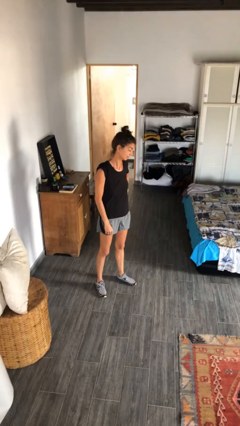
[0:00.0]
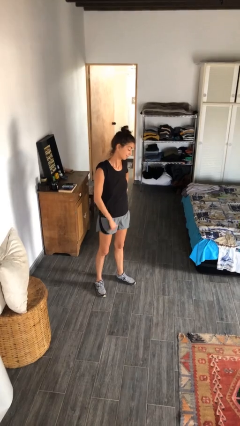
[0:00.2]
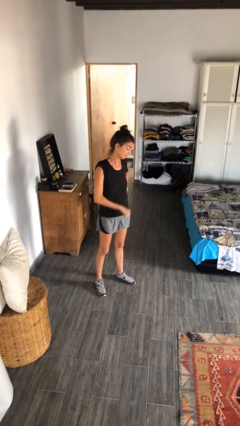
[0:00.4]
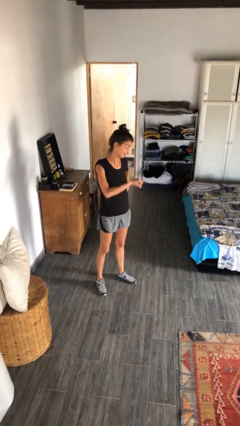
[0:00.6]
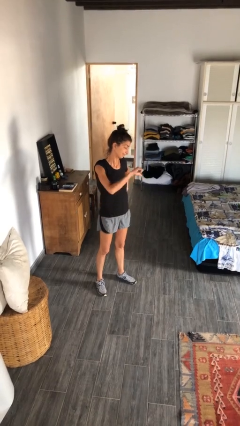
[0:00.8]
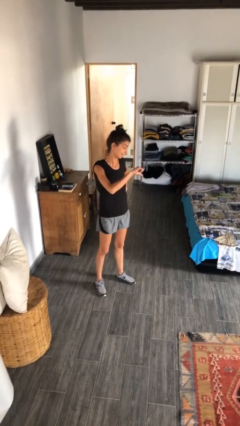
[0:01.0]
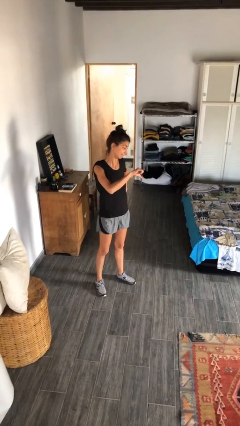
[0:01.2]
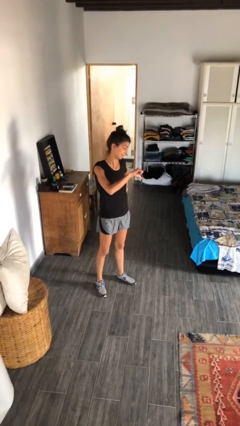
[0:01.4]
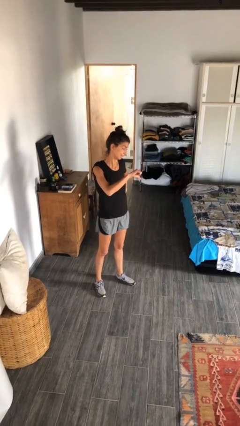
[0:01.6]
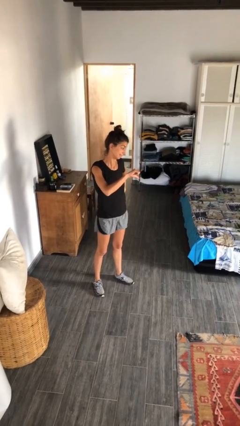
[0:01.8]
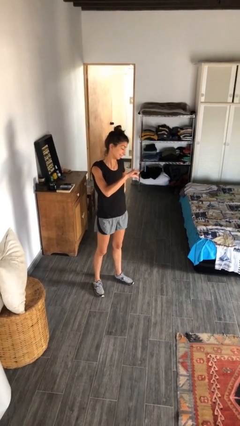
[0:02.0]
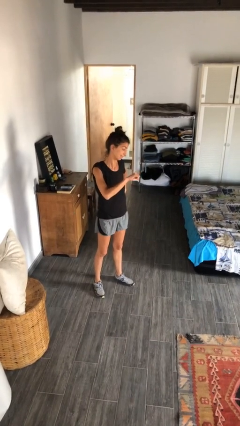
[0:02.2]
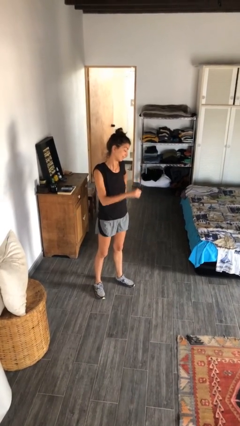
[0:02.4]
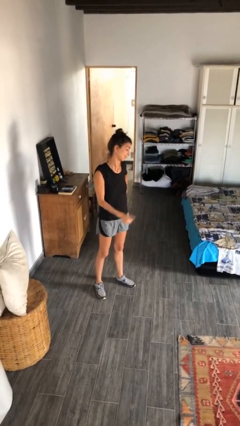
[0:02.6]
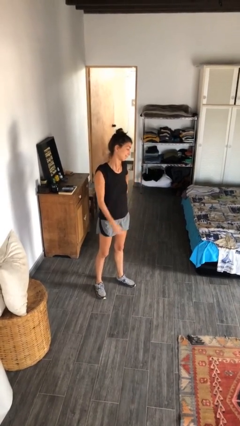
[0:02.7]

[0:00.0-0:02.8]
person gestures thumbs down

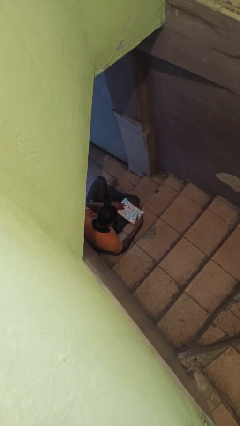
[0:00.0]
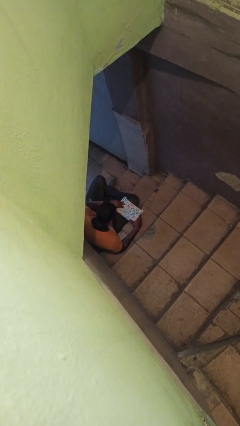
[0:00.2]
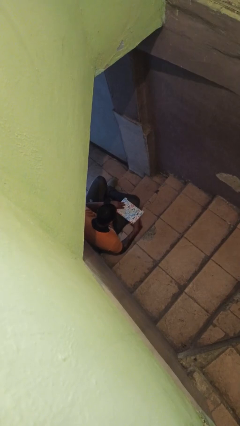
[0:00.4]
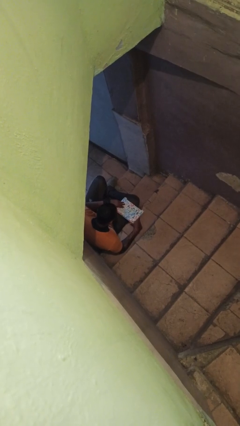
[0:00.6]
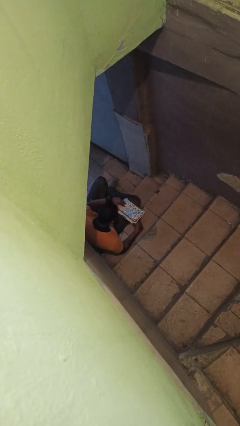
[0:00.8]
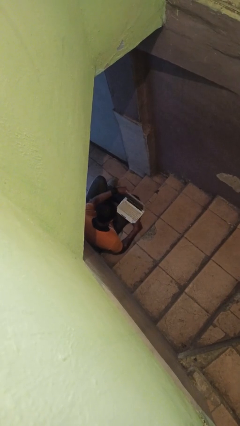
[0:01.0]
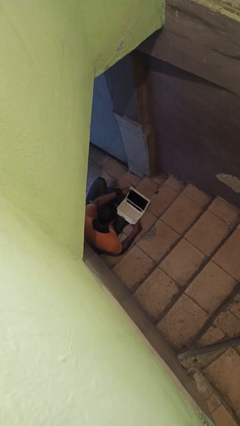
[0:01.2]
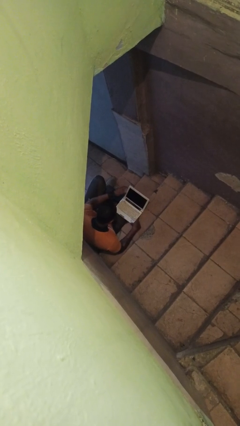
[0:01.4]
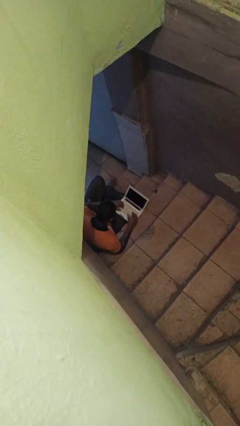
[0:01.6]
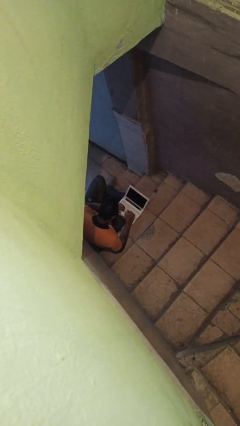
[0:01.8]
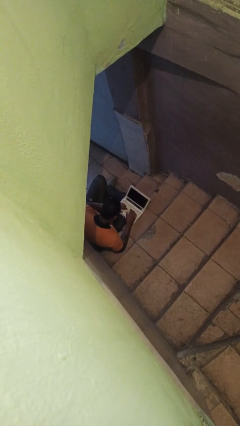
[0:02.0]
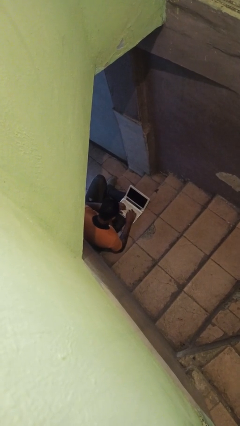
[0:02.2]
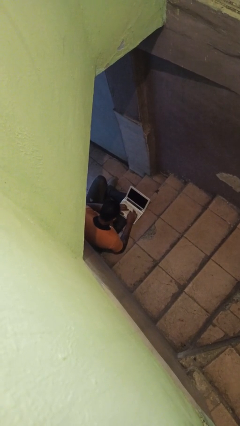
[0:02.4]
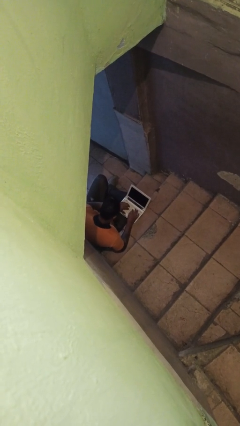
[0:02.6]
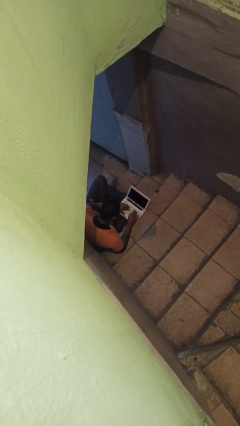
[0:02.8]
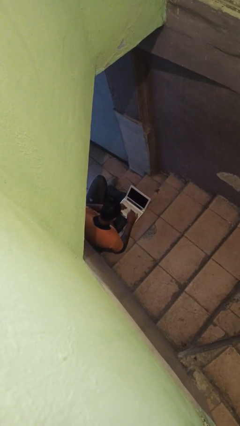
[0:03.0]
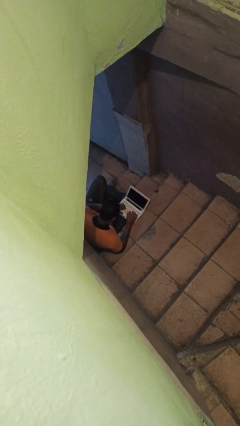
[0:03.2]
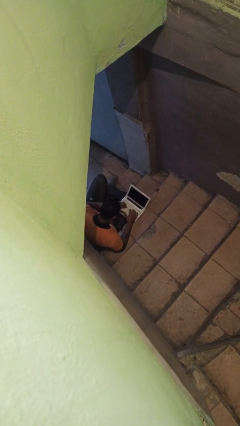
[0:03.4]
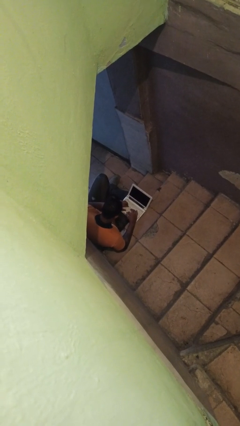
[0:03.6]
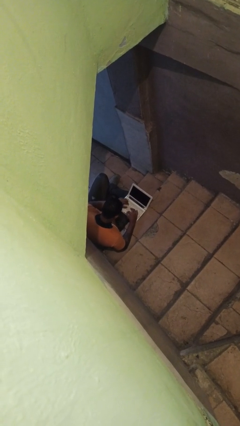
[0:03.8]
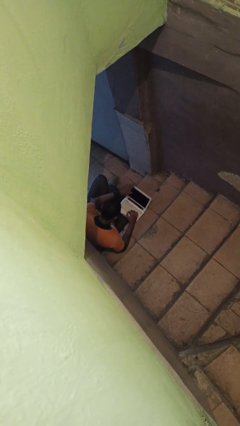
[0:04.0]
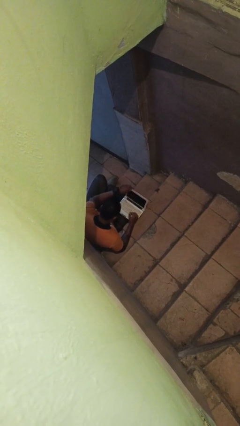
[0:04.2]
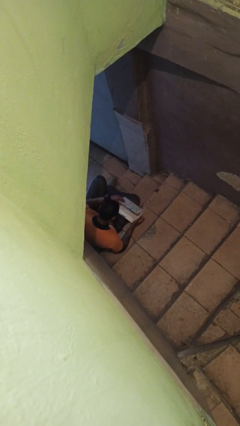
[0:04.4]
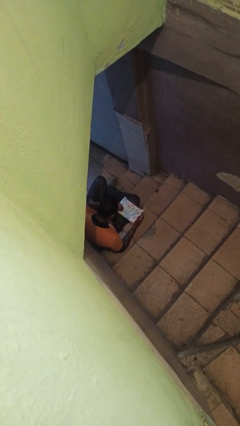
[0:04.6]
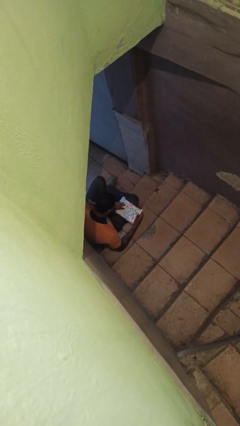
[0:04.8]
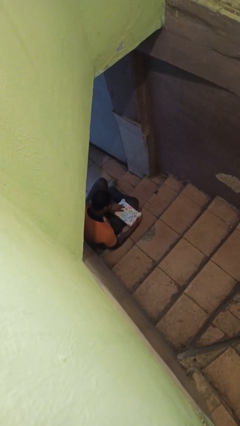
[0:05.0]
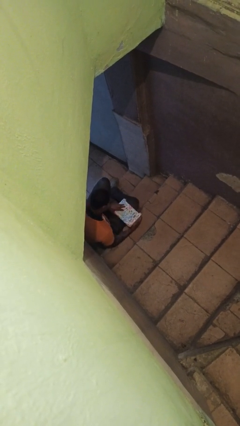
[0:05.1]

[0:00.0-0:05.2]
person interacts with laptop

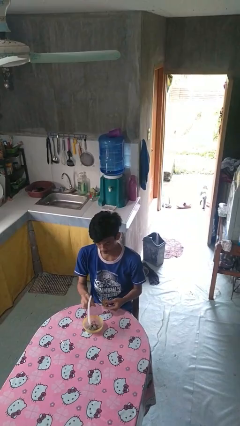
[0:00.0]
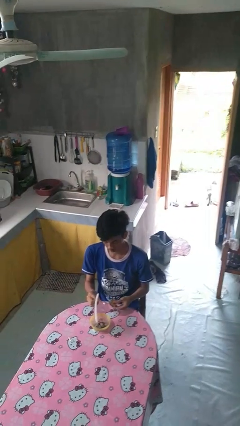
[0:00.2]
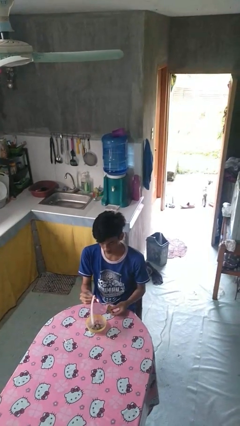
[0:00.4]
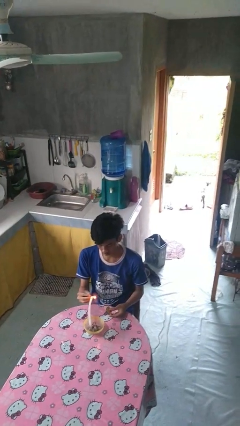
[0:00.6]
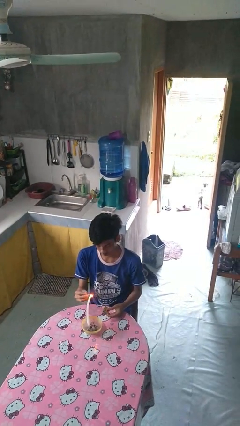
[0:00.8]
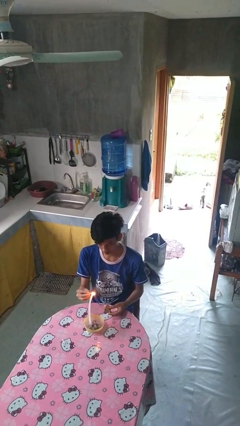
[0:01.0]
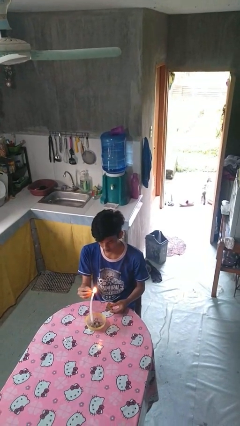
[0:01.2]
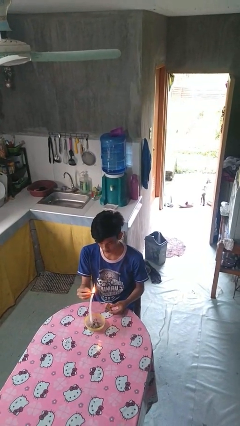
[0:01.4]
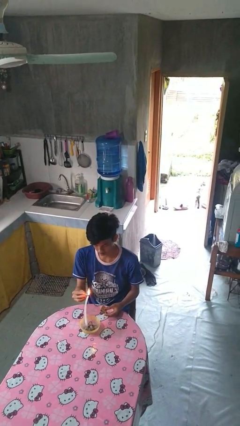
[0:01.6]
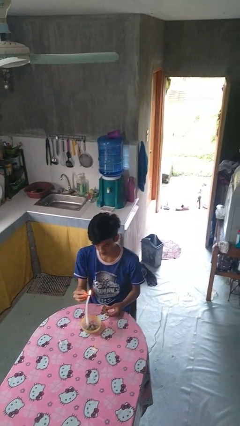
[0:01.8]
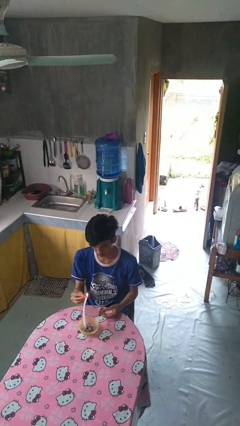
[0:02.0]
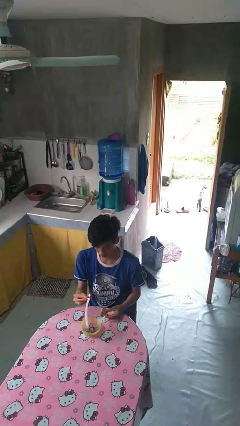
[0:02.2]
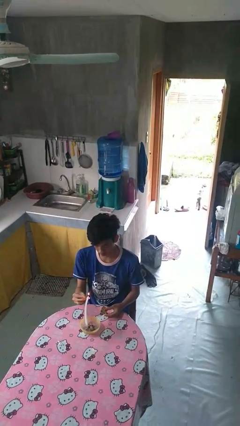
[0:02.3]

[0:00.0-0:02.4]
person lights candle

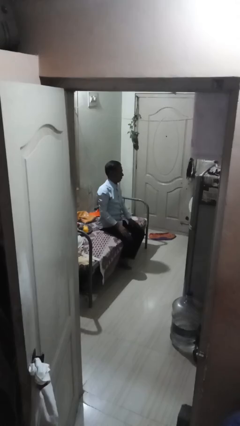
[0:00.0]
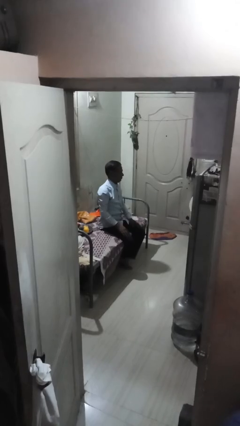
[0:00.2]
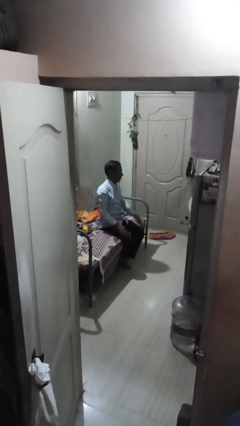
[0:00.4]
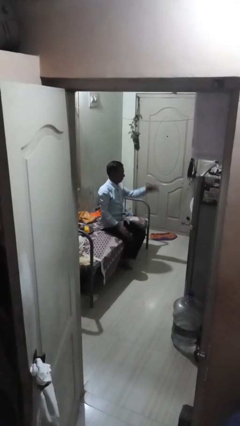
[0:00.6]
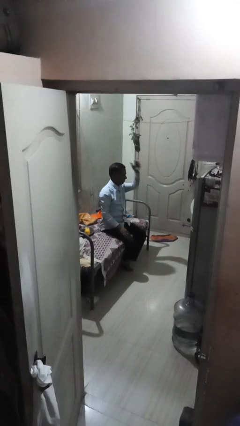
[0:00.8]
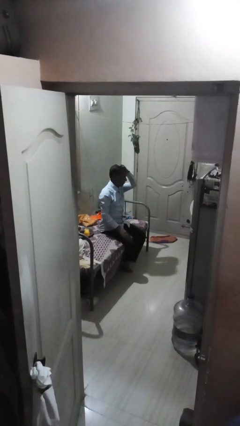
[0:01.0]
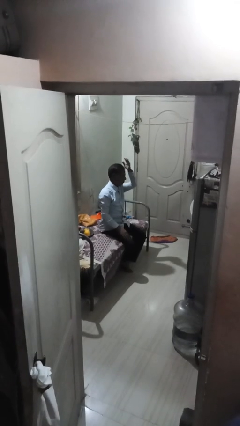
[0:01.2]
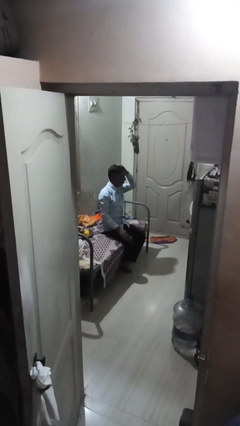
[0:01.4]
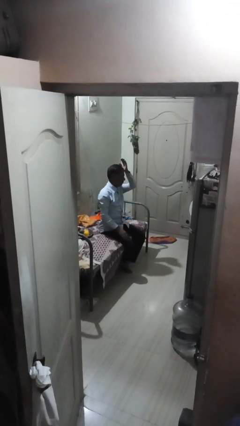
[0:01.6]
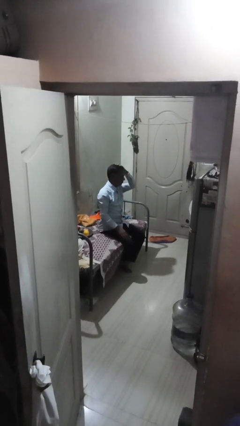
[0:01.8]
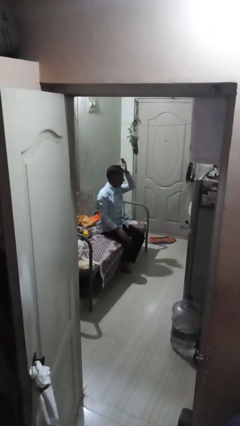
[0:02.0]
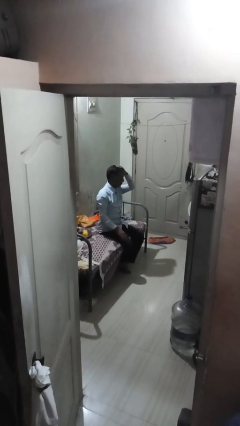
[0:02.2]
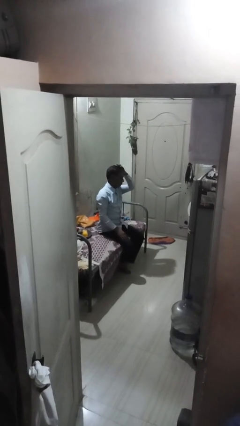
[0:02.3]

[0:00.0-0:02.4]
person pats head

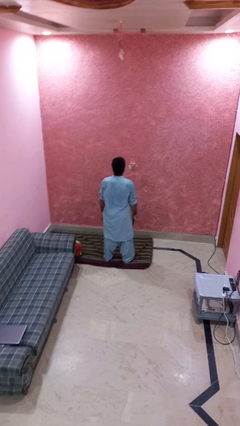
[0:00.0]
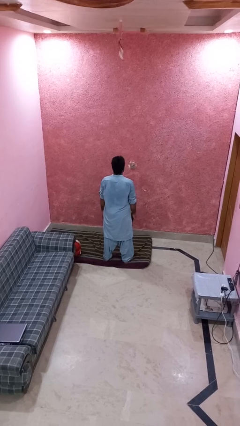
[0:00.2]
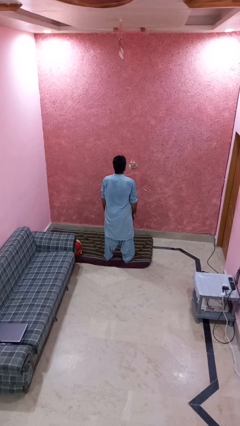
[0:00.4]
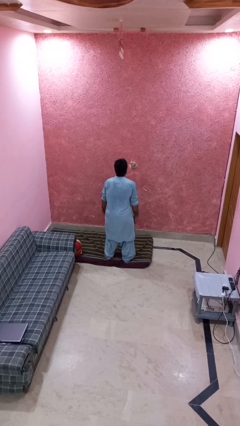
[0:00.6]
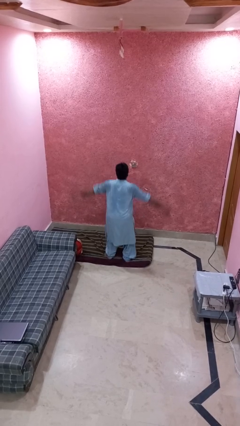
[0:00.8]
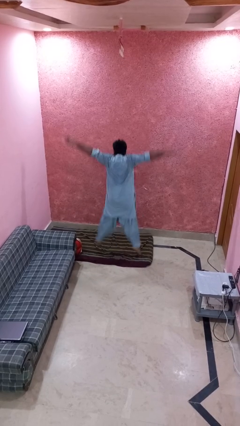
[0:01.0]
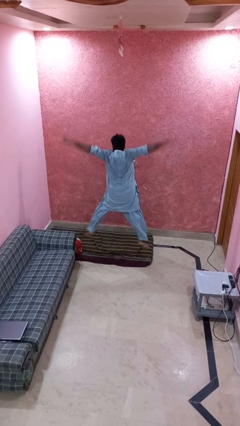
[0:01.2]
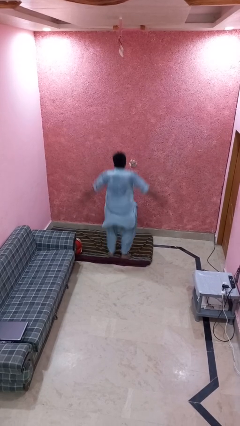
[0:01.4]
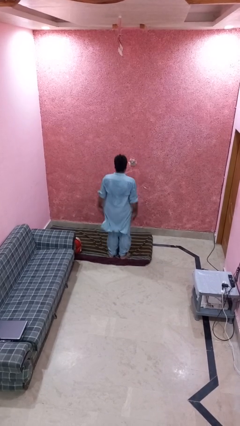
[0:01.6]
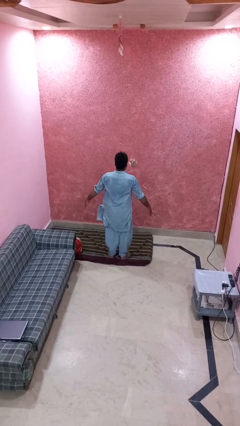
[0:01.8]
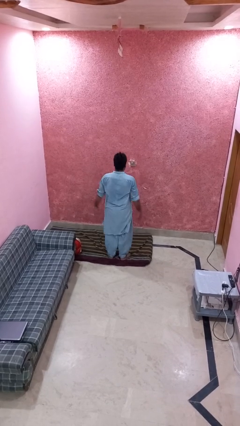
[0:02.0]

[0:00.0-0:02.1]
person exercises with jumping jacks

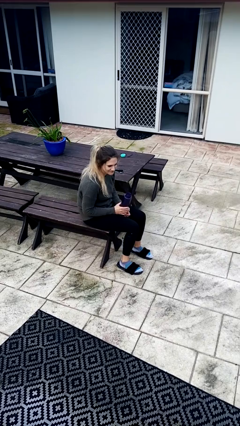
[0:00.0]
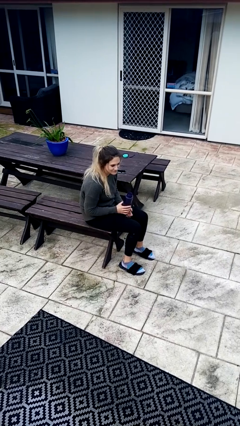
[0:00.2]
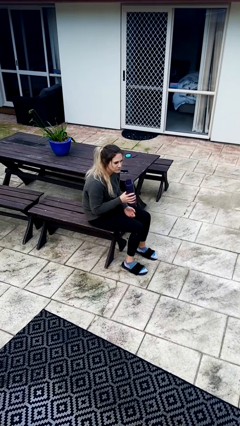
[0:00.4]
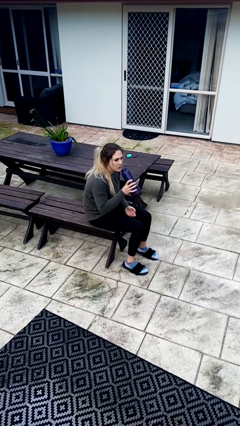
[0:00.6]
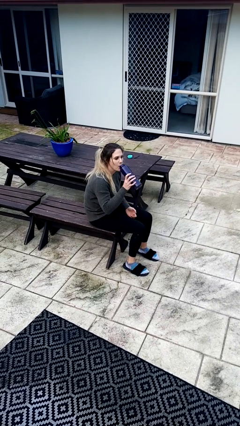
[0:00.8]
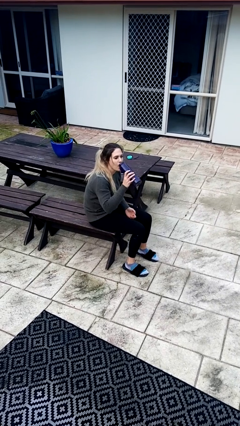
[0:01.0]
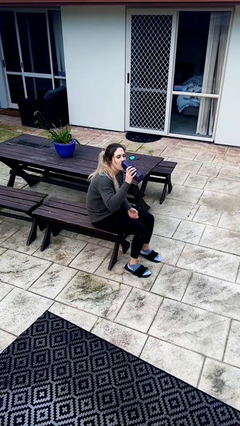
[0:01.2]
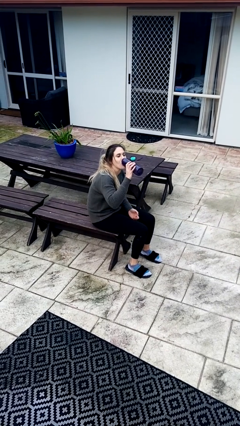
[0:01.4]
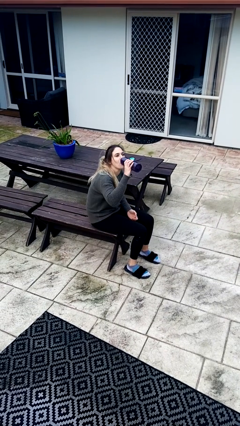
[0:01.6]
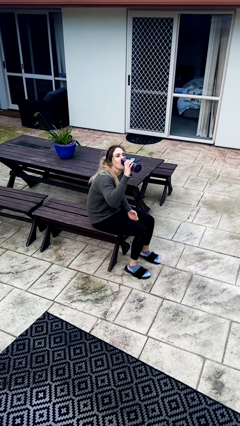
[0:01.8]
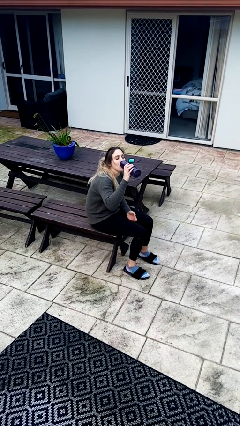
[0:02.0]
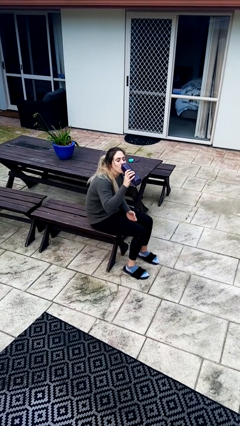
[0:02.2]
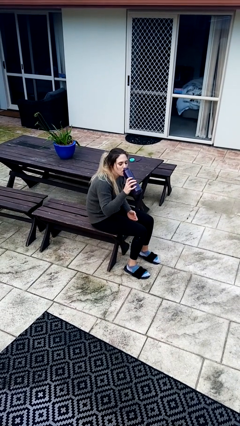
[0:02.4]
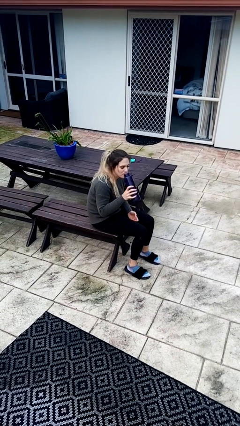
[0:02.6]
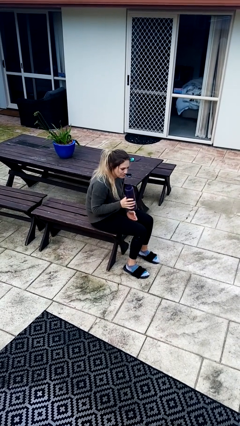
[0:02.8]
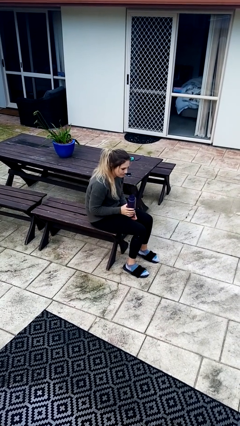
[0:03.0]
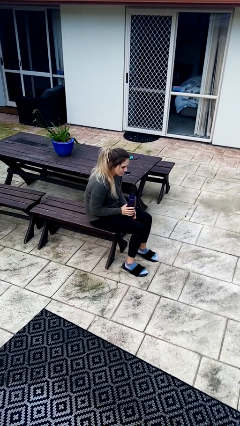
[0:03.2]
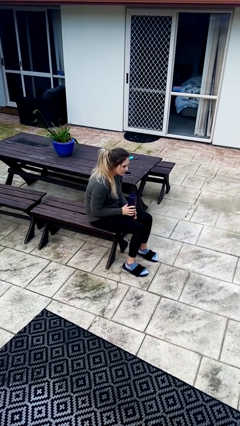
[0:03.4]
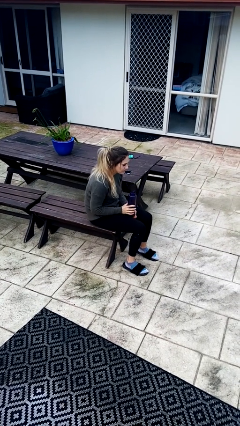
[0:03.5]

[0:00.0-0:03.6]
person drinks from bottle
